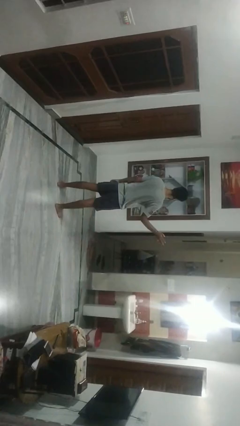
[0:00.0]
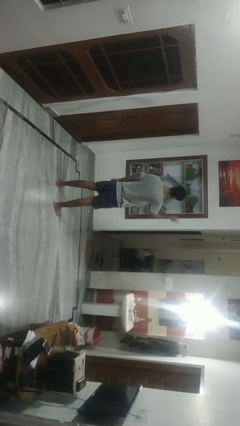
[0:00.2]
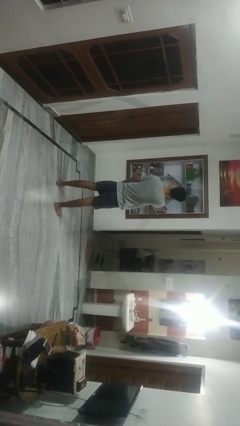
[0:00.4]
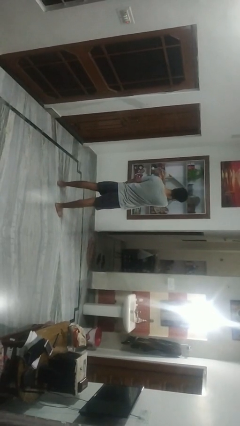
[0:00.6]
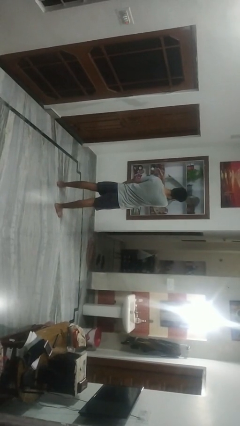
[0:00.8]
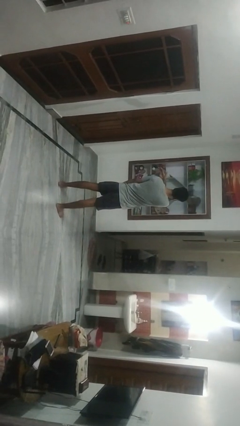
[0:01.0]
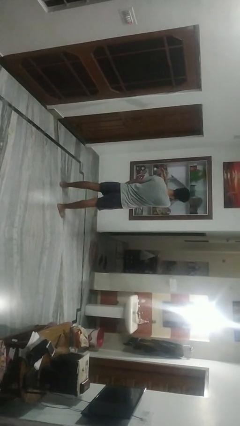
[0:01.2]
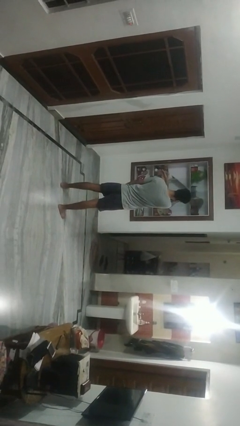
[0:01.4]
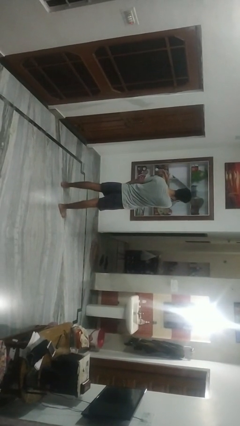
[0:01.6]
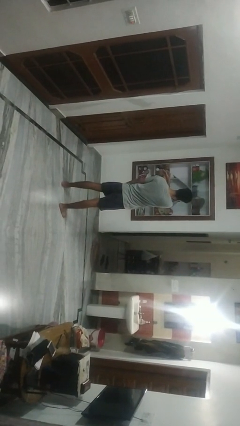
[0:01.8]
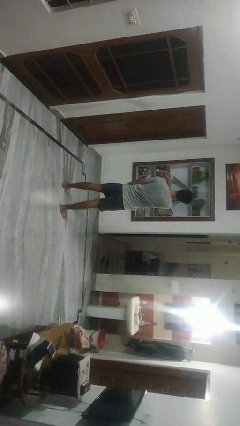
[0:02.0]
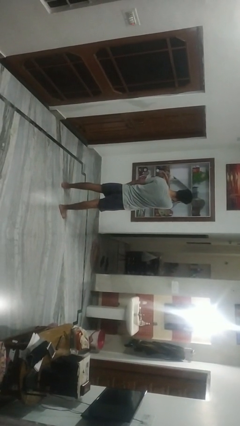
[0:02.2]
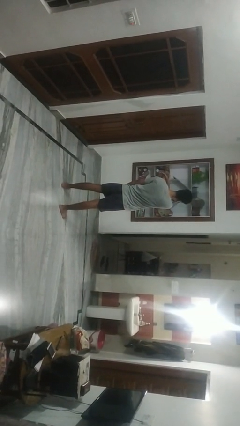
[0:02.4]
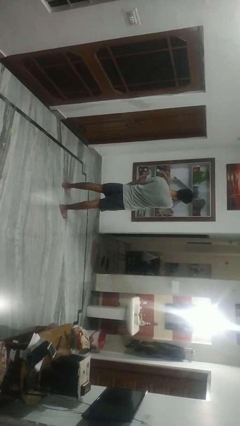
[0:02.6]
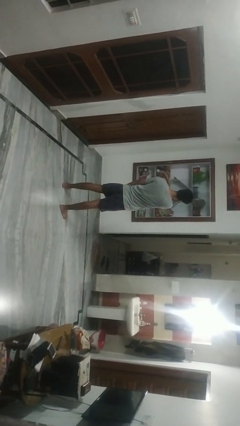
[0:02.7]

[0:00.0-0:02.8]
person gestures swipe left

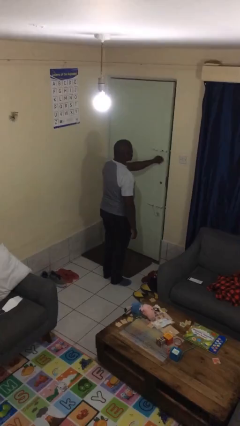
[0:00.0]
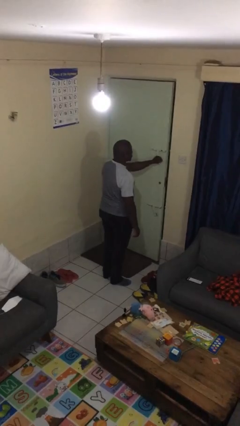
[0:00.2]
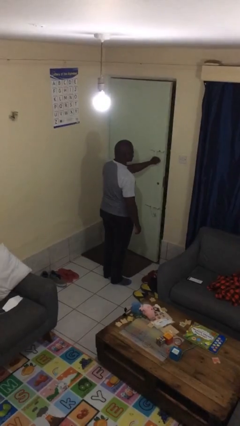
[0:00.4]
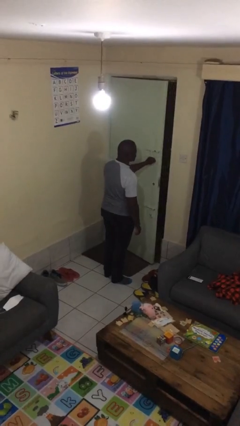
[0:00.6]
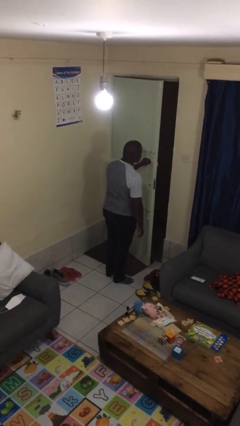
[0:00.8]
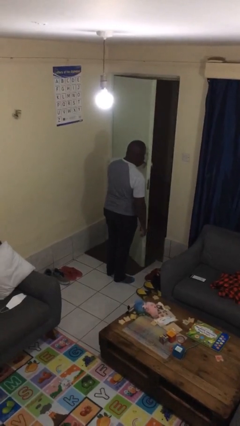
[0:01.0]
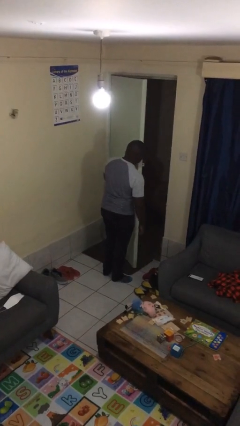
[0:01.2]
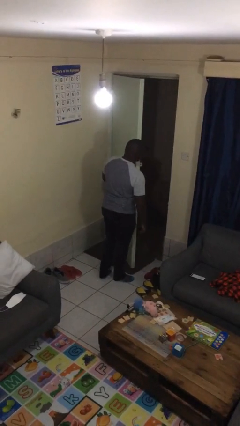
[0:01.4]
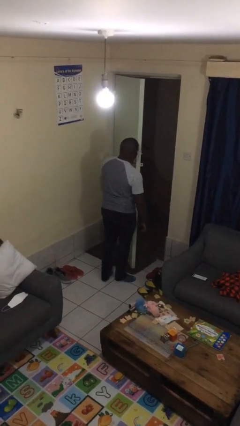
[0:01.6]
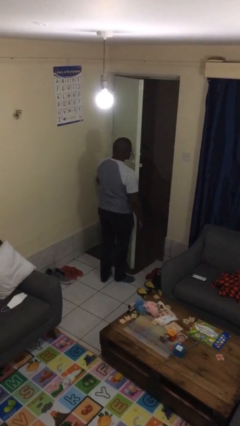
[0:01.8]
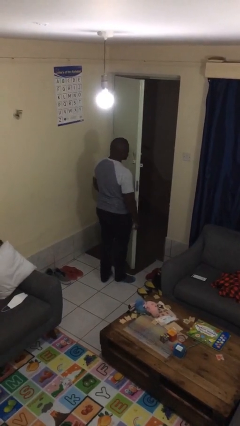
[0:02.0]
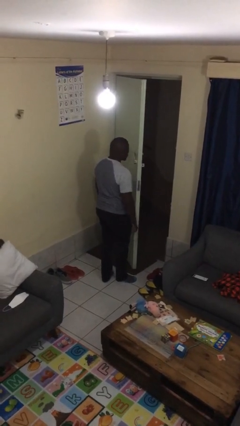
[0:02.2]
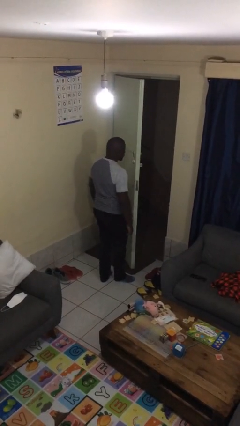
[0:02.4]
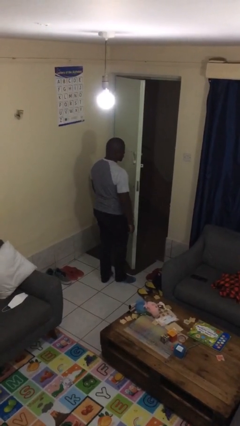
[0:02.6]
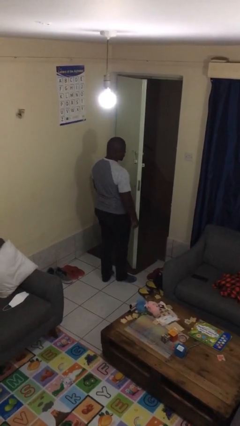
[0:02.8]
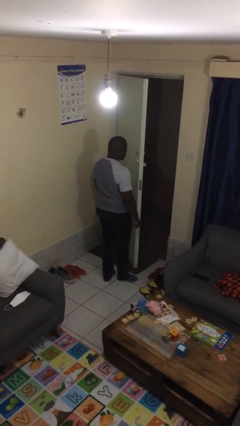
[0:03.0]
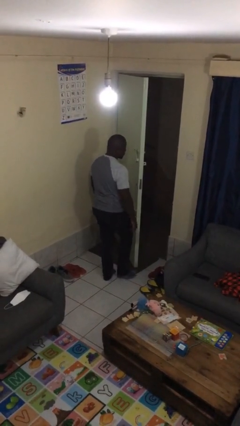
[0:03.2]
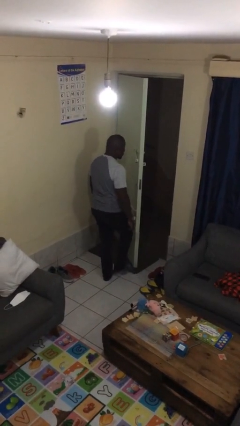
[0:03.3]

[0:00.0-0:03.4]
person opens facility door

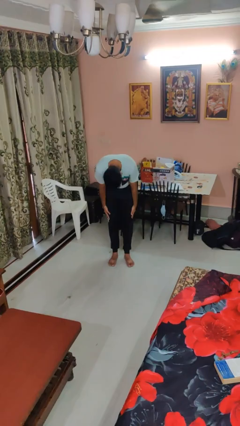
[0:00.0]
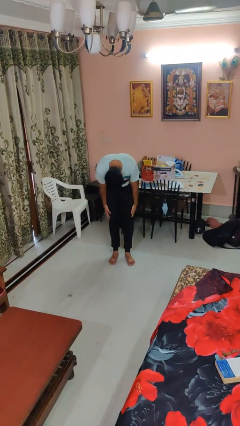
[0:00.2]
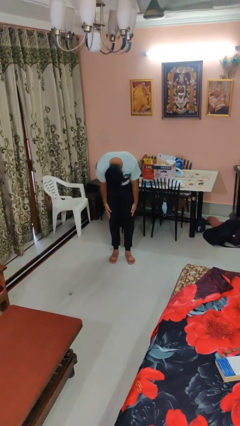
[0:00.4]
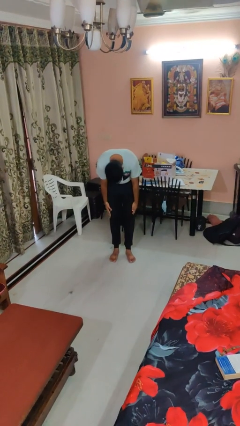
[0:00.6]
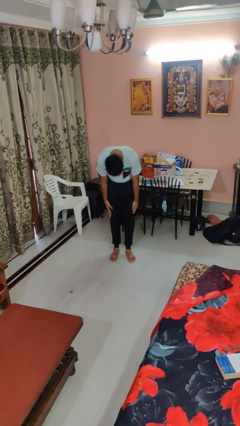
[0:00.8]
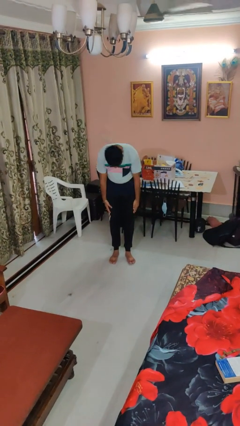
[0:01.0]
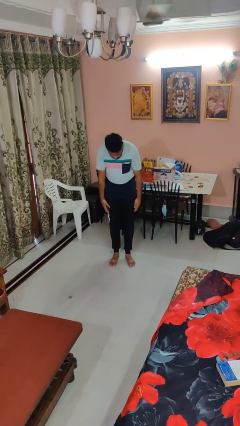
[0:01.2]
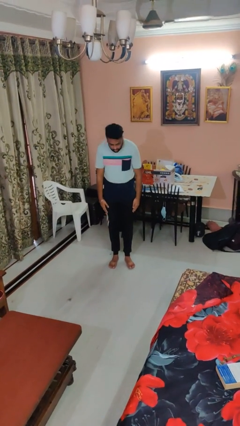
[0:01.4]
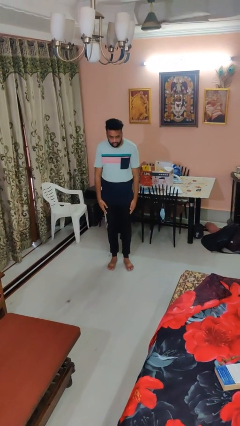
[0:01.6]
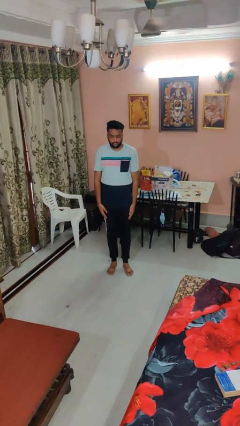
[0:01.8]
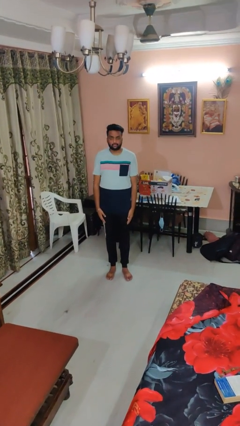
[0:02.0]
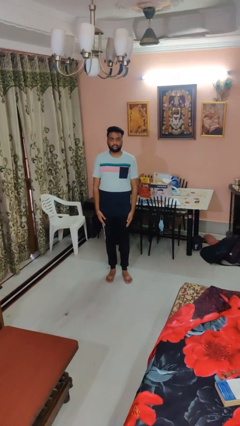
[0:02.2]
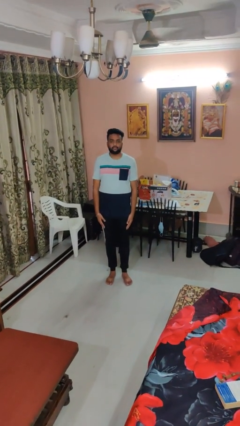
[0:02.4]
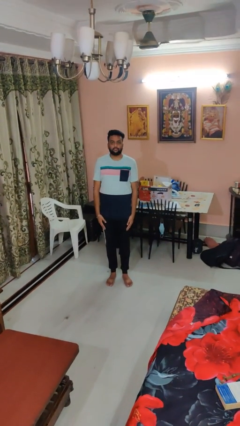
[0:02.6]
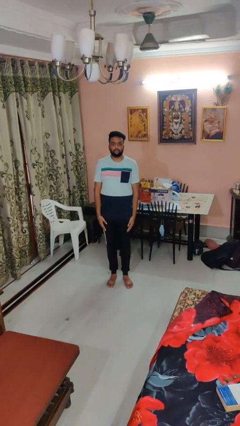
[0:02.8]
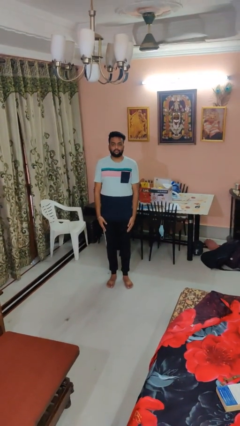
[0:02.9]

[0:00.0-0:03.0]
person bows

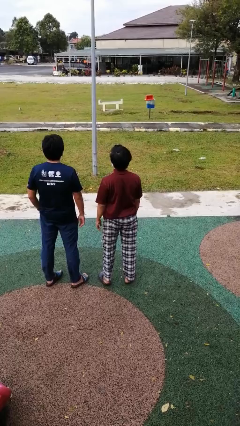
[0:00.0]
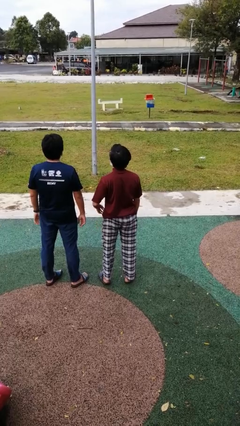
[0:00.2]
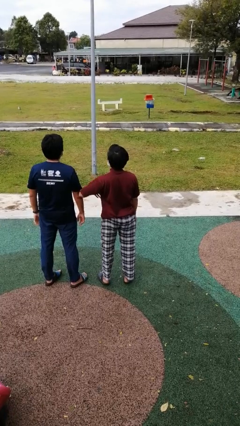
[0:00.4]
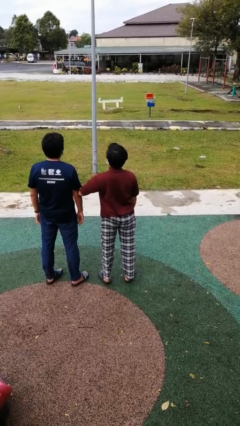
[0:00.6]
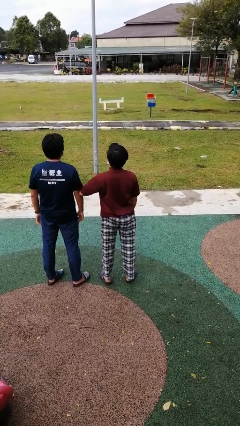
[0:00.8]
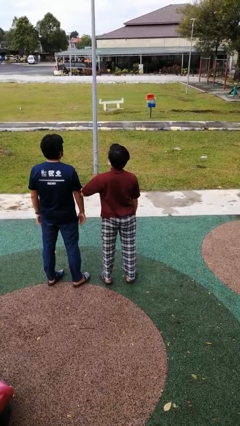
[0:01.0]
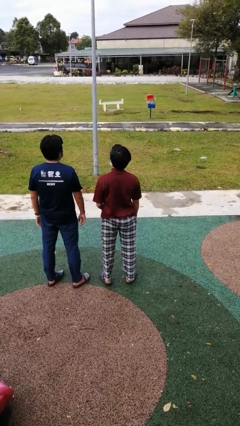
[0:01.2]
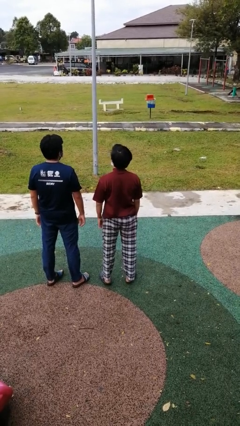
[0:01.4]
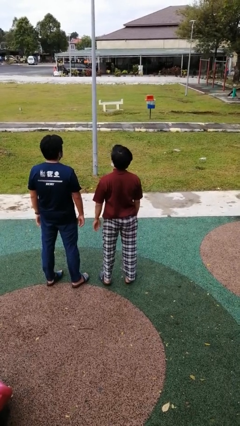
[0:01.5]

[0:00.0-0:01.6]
person nudges person with elbow

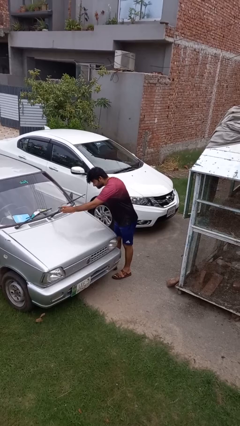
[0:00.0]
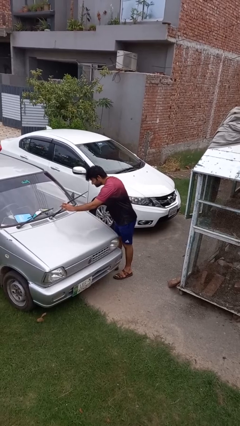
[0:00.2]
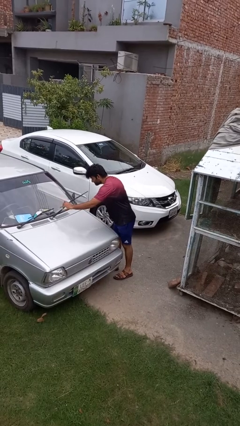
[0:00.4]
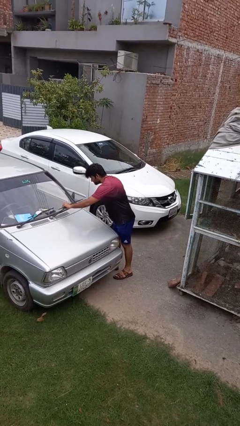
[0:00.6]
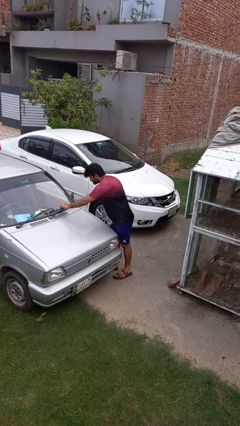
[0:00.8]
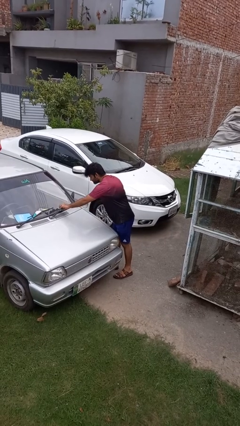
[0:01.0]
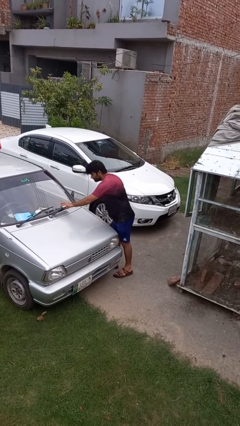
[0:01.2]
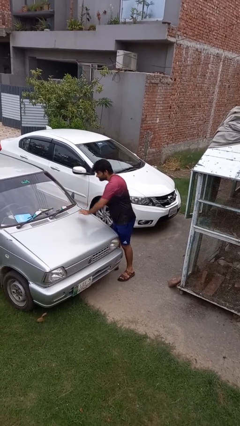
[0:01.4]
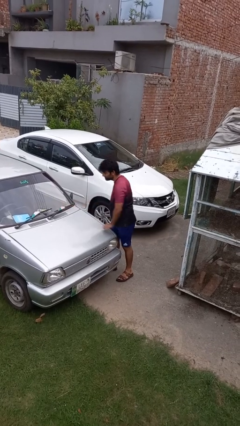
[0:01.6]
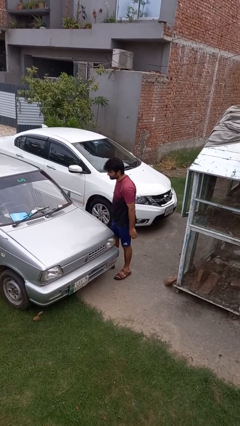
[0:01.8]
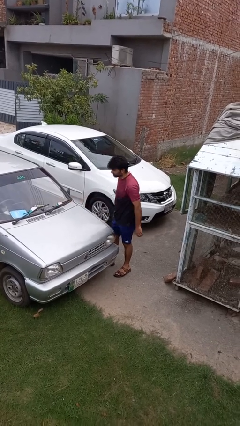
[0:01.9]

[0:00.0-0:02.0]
person flips down car wipers

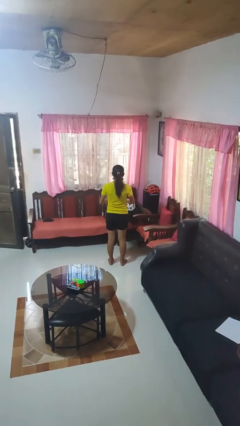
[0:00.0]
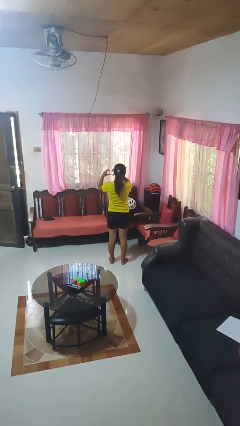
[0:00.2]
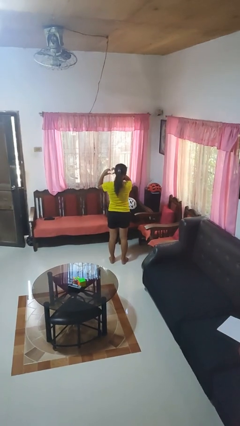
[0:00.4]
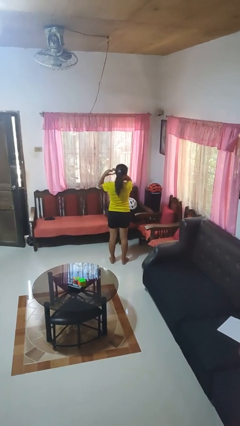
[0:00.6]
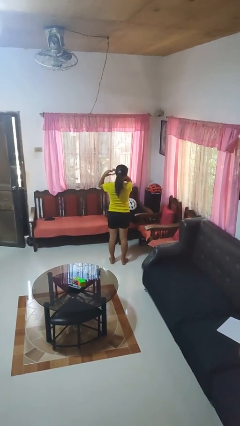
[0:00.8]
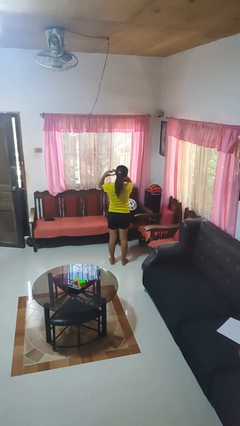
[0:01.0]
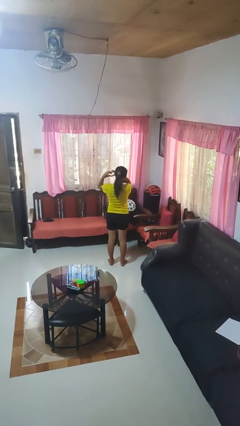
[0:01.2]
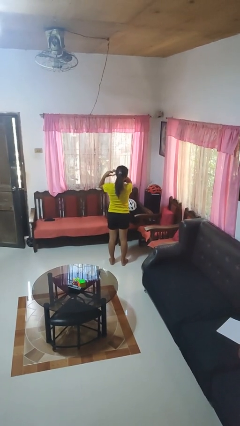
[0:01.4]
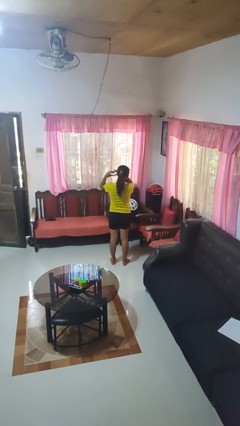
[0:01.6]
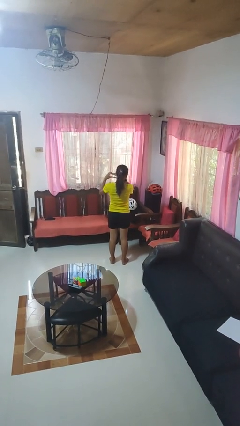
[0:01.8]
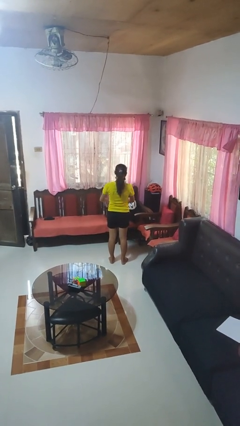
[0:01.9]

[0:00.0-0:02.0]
person gestures heart

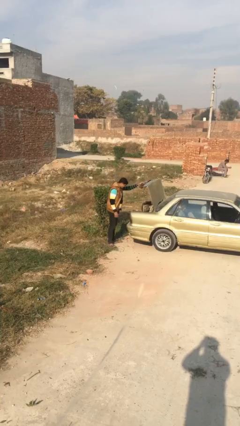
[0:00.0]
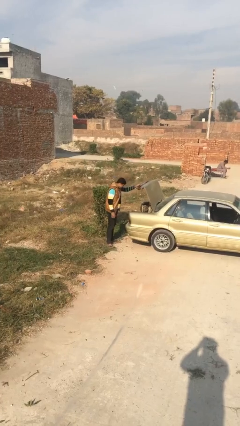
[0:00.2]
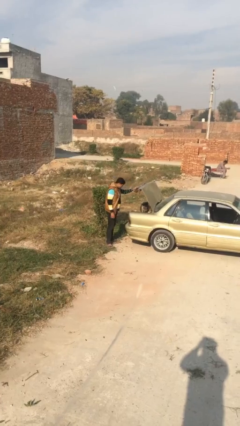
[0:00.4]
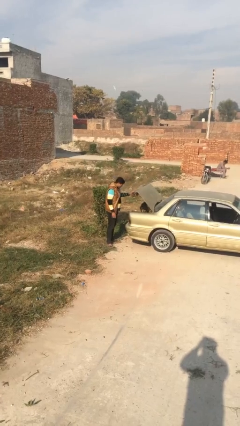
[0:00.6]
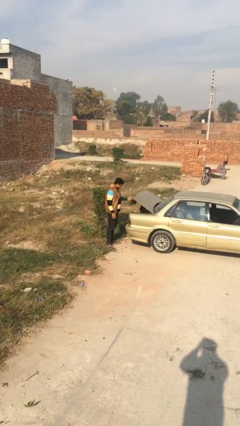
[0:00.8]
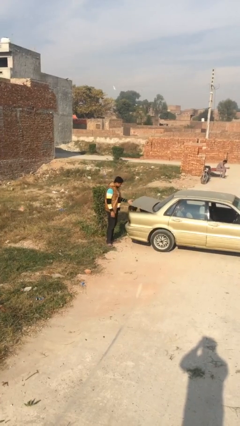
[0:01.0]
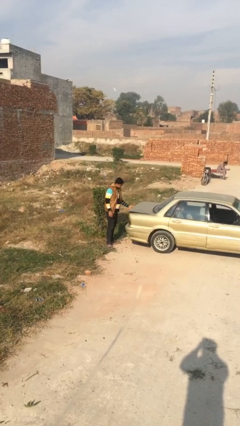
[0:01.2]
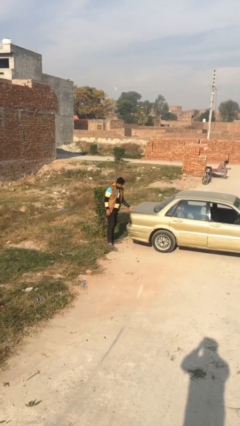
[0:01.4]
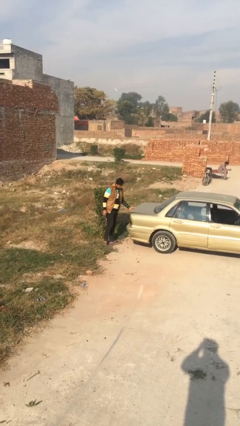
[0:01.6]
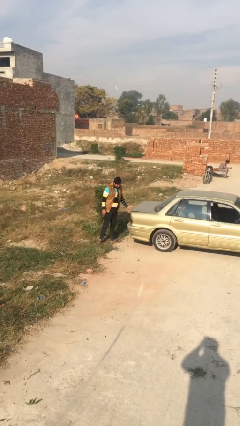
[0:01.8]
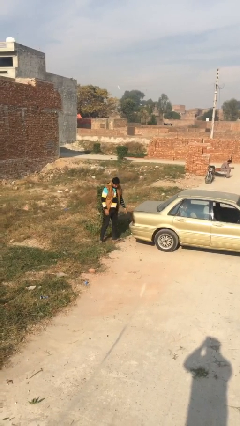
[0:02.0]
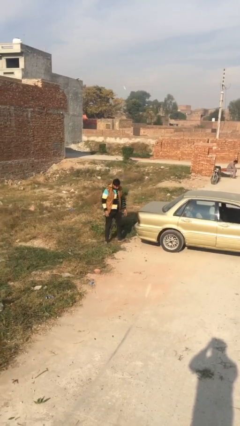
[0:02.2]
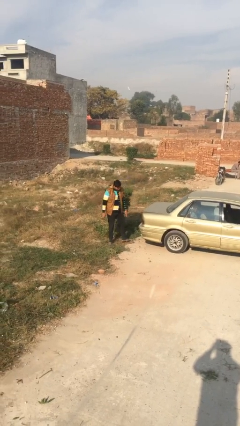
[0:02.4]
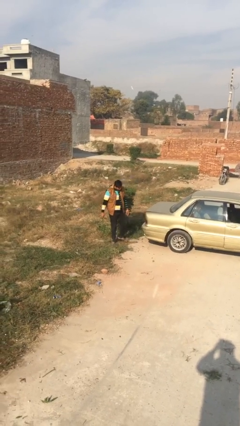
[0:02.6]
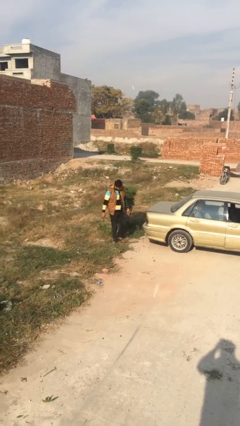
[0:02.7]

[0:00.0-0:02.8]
person closes car trunk
